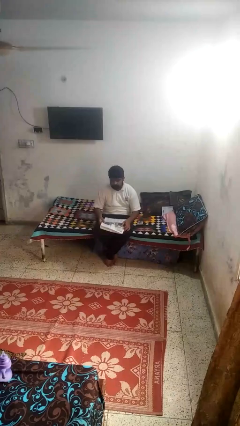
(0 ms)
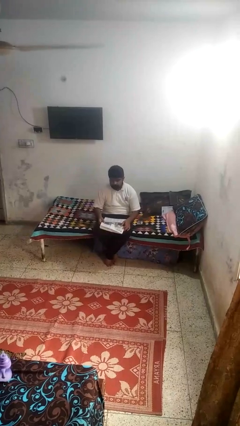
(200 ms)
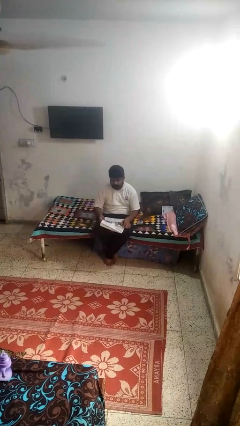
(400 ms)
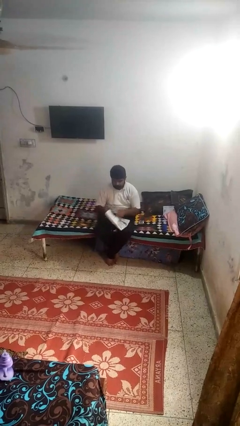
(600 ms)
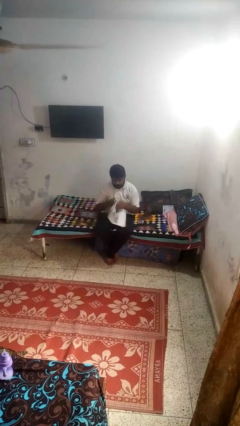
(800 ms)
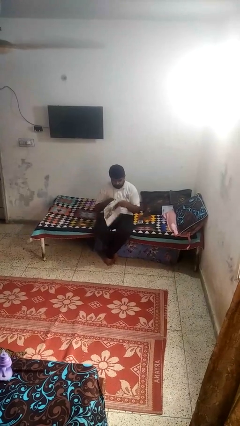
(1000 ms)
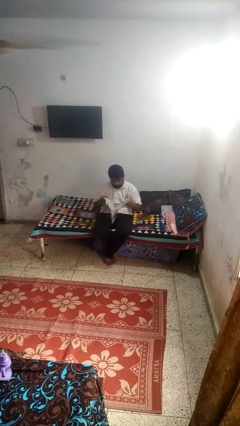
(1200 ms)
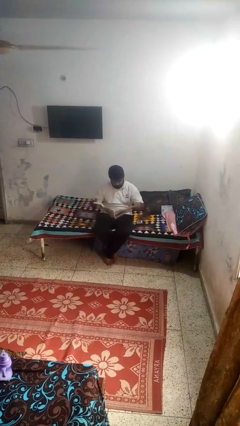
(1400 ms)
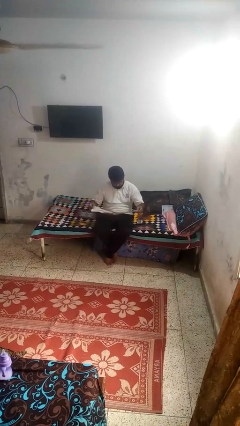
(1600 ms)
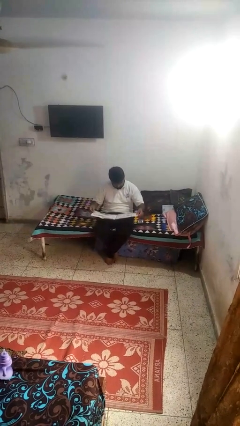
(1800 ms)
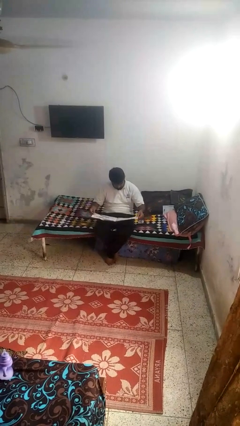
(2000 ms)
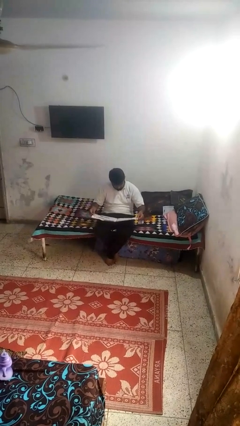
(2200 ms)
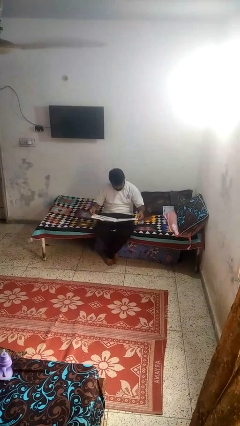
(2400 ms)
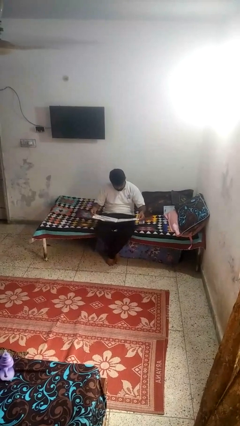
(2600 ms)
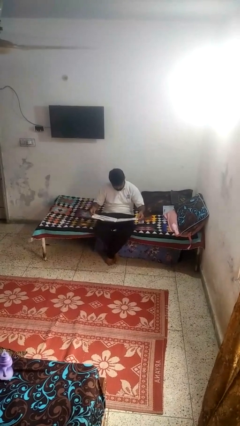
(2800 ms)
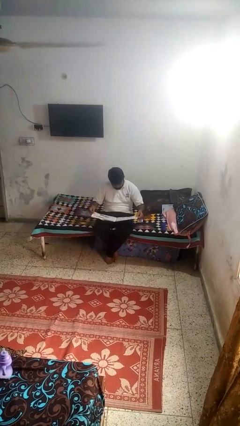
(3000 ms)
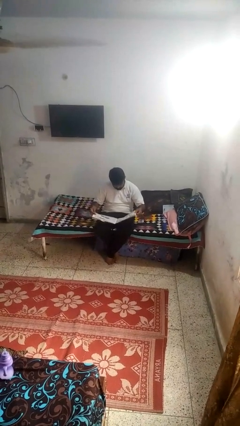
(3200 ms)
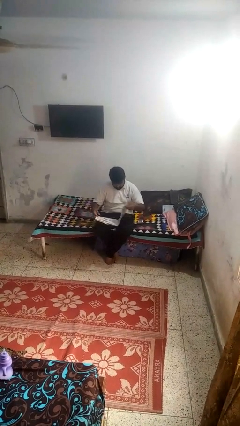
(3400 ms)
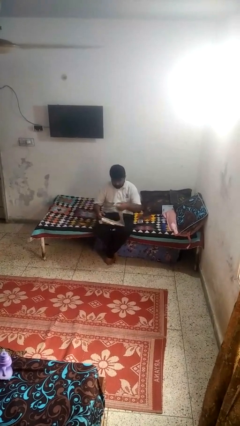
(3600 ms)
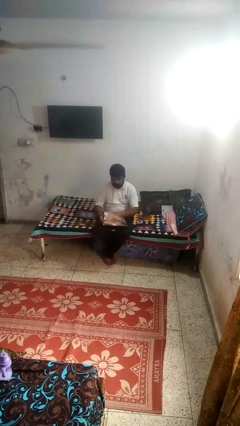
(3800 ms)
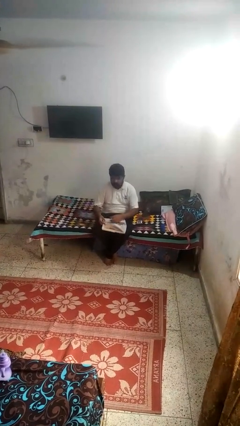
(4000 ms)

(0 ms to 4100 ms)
person reads magazine

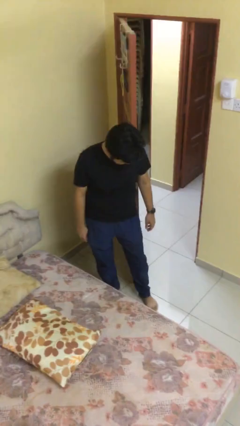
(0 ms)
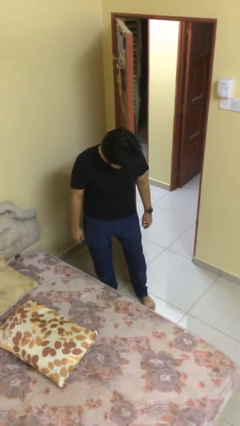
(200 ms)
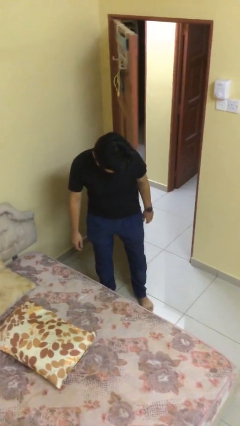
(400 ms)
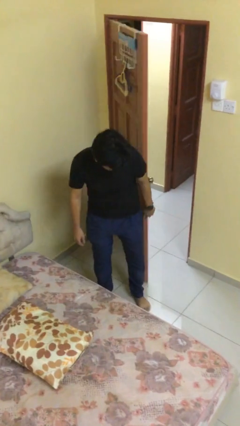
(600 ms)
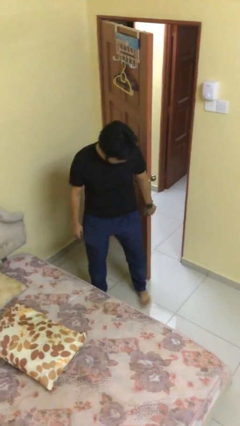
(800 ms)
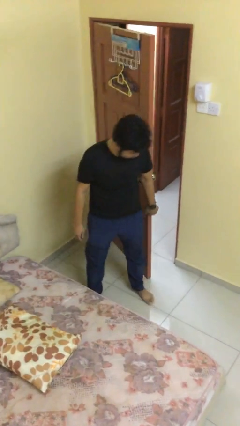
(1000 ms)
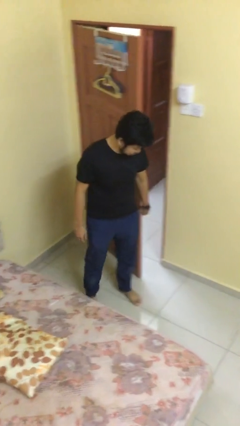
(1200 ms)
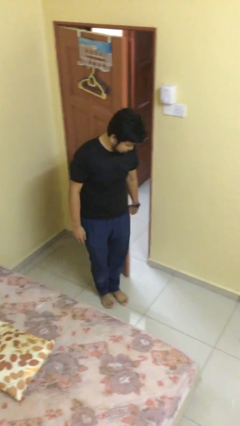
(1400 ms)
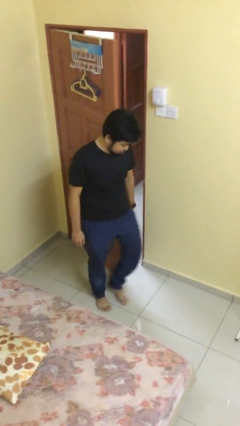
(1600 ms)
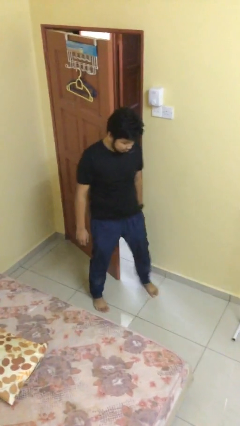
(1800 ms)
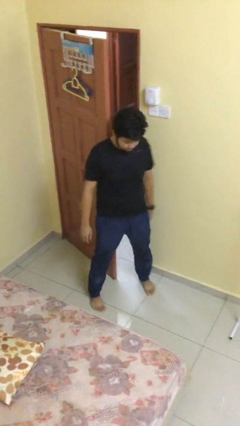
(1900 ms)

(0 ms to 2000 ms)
person closes door with hip

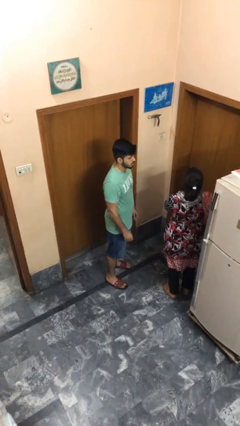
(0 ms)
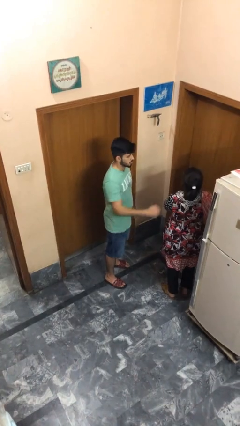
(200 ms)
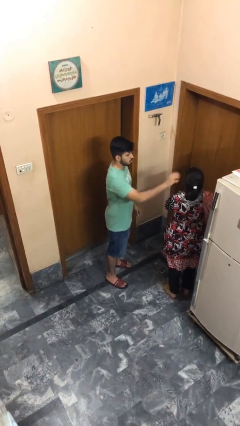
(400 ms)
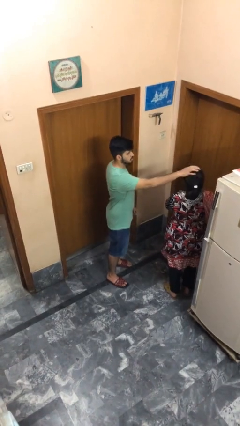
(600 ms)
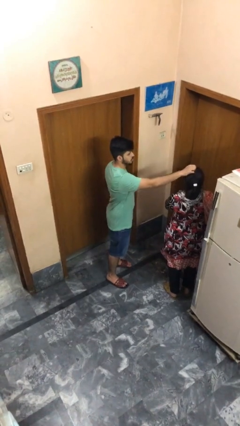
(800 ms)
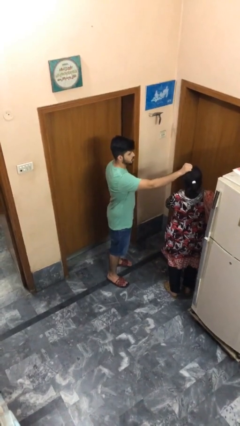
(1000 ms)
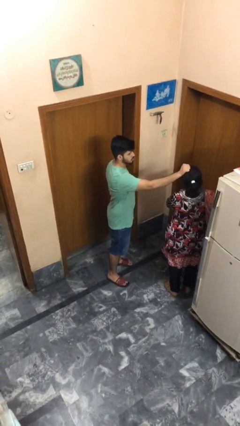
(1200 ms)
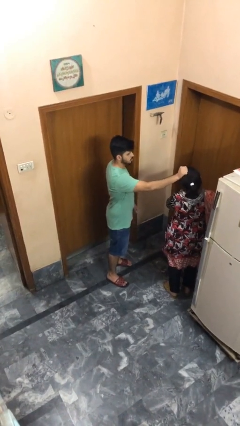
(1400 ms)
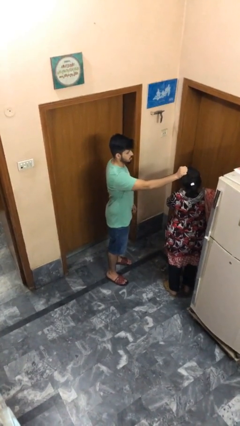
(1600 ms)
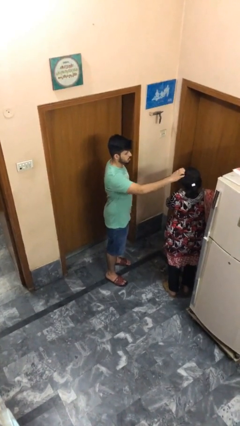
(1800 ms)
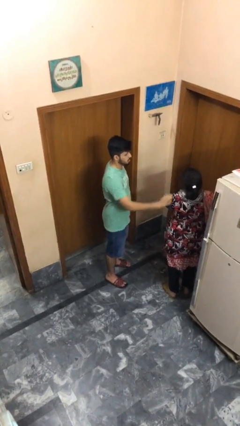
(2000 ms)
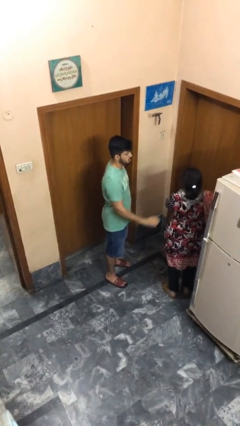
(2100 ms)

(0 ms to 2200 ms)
person grabs person by hair

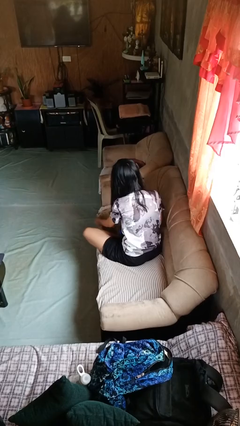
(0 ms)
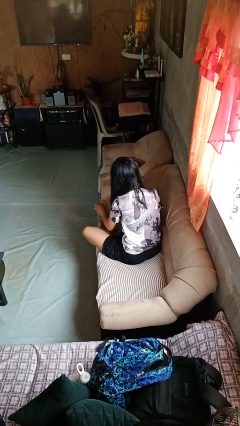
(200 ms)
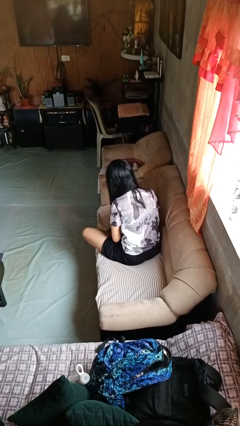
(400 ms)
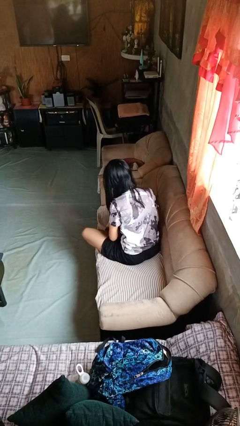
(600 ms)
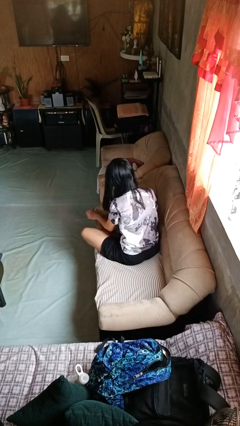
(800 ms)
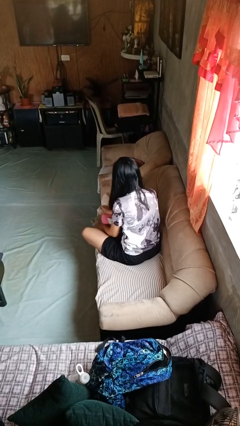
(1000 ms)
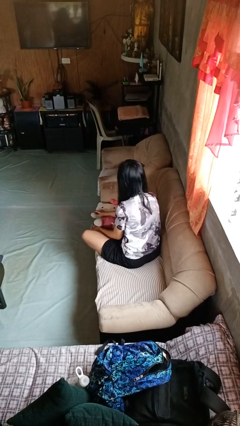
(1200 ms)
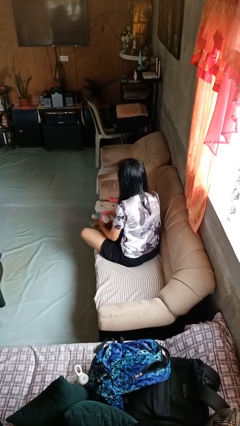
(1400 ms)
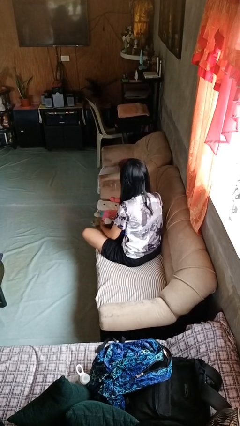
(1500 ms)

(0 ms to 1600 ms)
person searches in couch

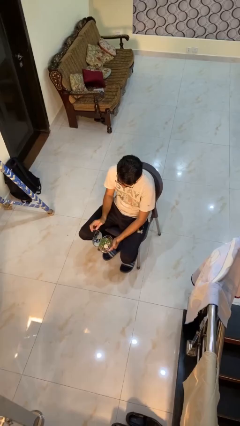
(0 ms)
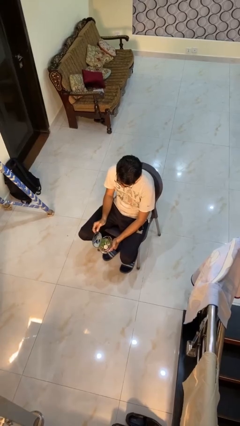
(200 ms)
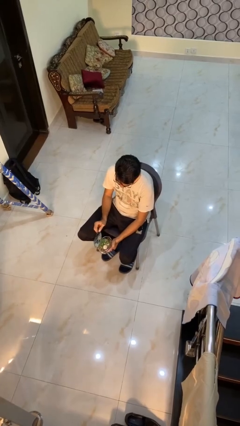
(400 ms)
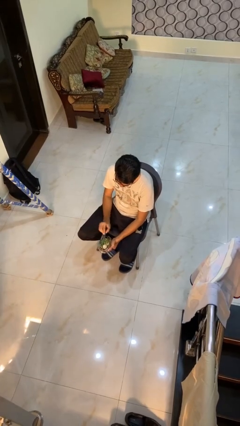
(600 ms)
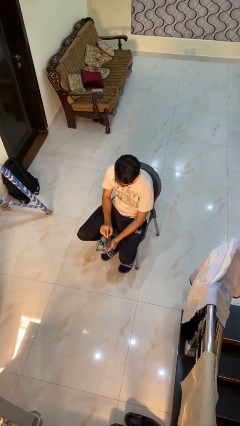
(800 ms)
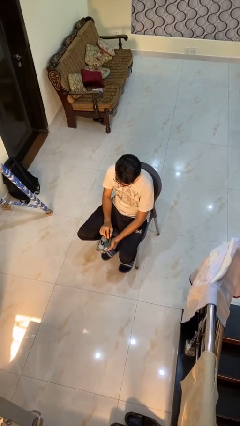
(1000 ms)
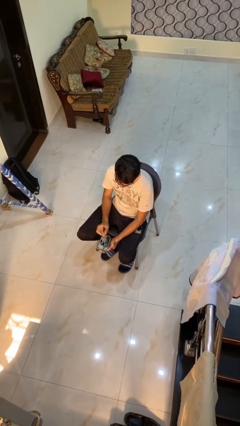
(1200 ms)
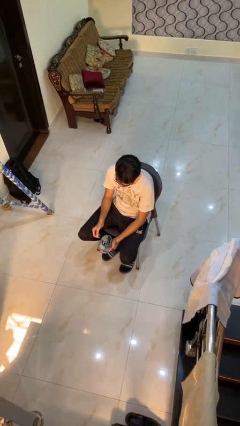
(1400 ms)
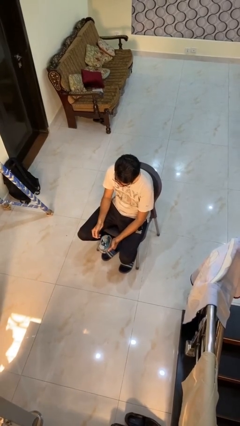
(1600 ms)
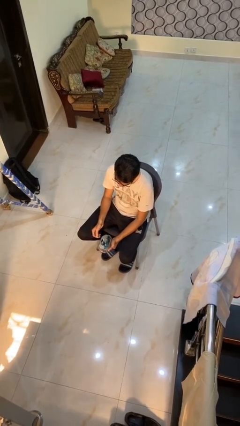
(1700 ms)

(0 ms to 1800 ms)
person closes jewelry box

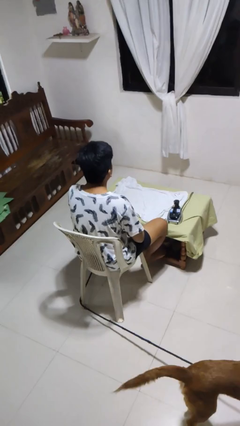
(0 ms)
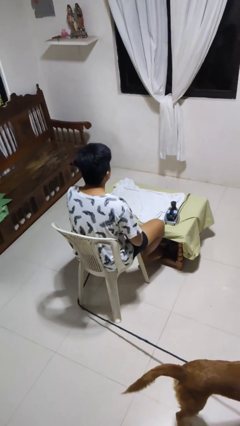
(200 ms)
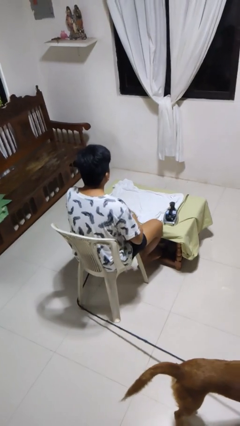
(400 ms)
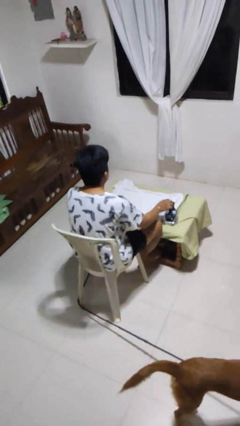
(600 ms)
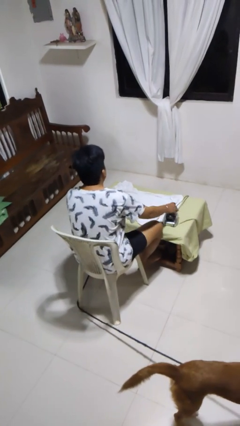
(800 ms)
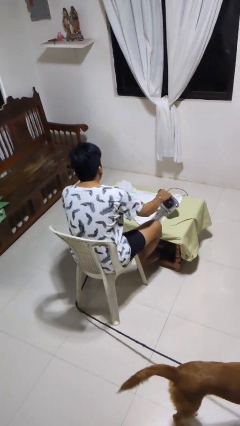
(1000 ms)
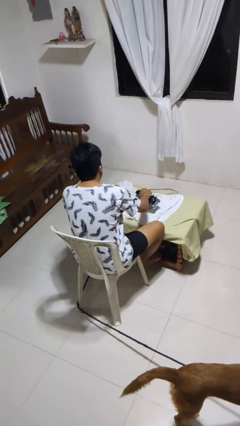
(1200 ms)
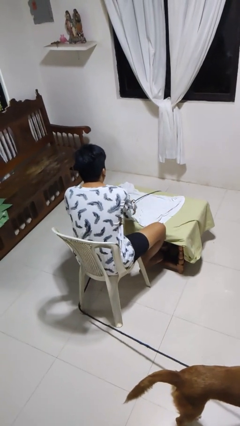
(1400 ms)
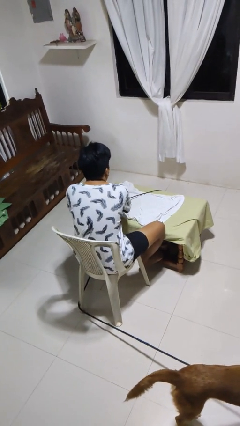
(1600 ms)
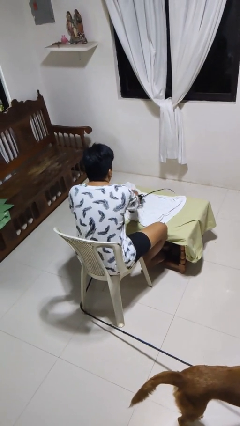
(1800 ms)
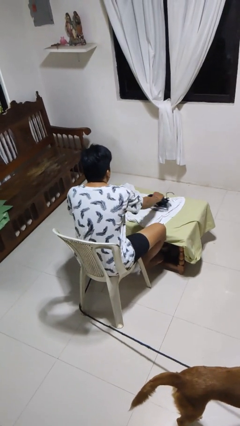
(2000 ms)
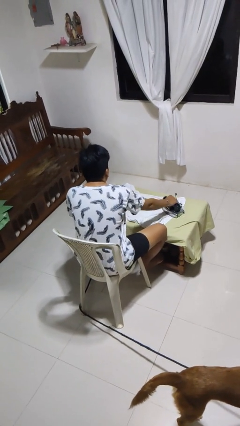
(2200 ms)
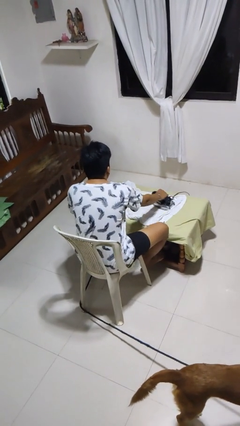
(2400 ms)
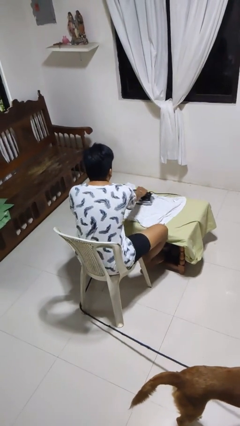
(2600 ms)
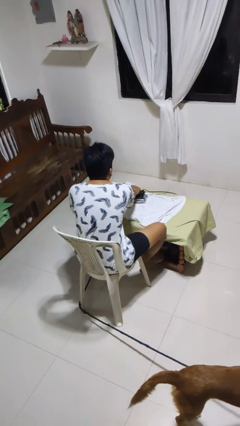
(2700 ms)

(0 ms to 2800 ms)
person irons clothes

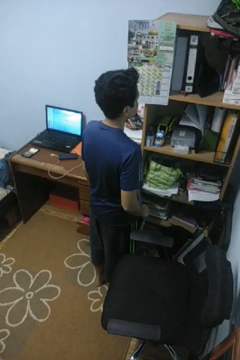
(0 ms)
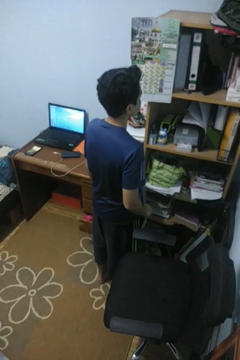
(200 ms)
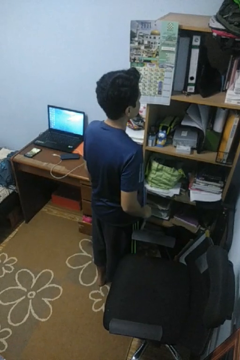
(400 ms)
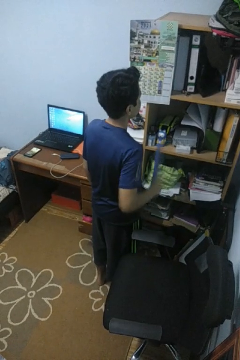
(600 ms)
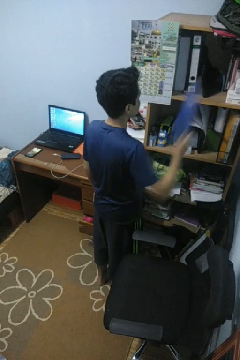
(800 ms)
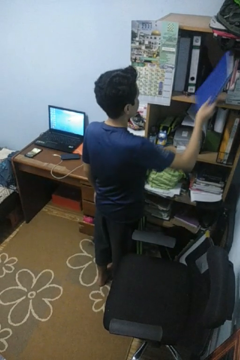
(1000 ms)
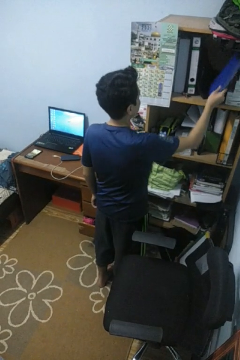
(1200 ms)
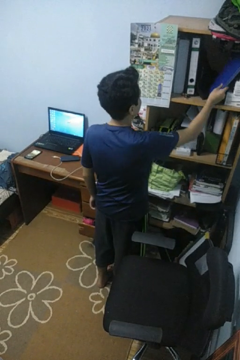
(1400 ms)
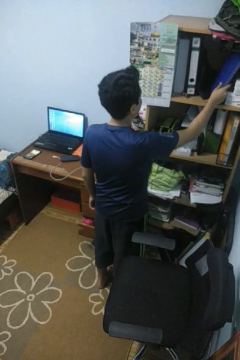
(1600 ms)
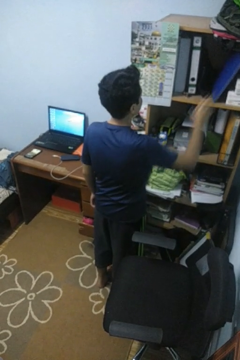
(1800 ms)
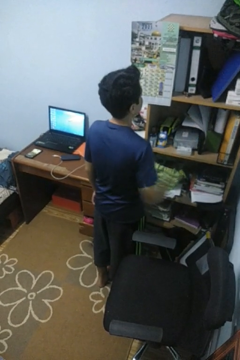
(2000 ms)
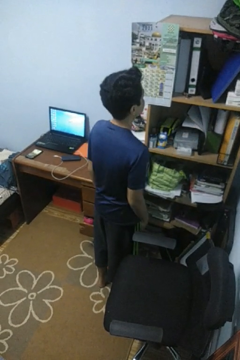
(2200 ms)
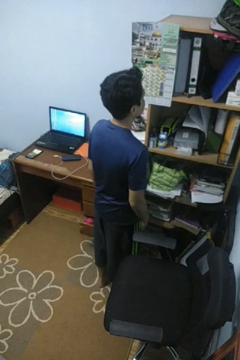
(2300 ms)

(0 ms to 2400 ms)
person puts down object into cabinet

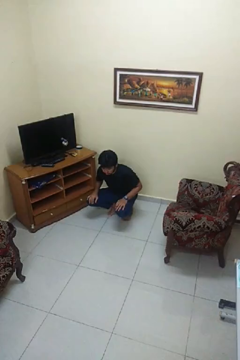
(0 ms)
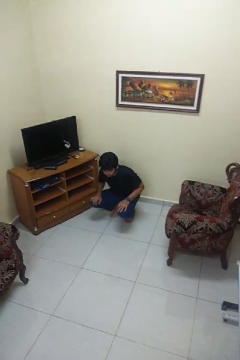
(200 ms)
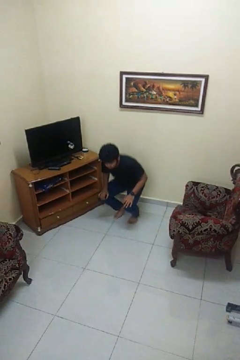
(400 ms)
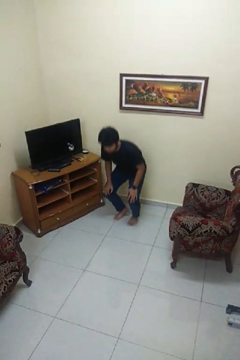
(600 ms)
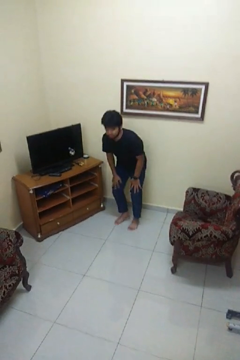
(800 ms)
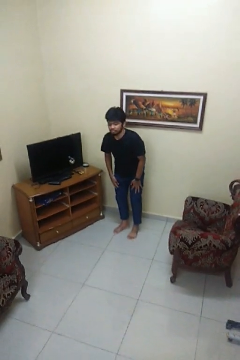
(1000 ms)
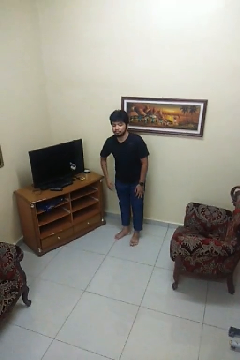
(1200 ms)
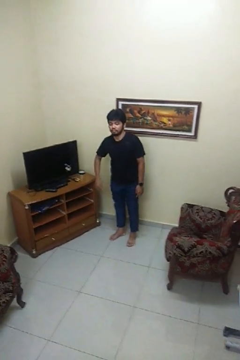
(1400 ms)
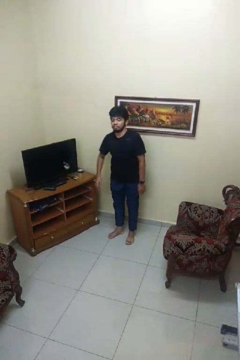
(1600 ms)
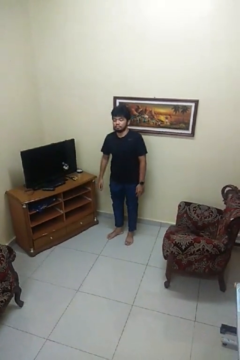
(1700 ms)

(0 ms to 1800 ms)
person stands up
